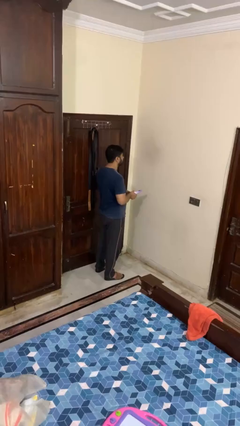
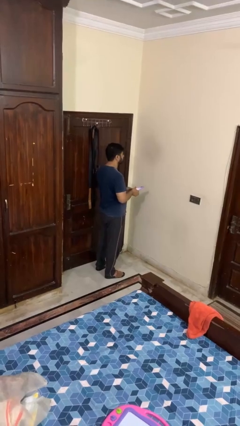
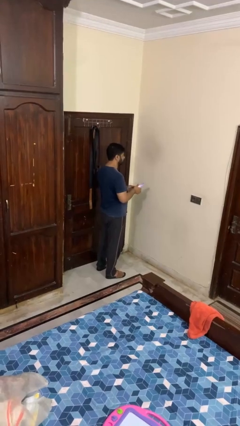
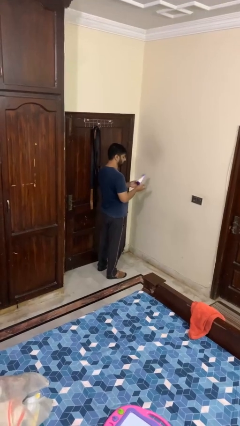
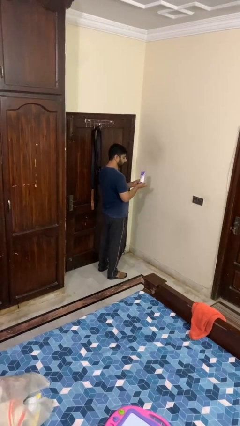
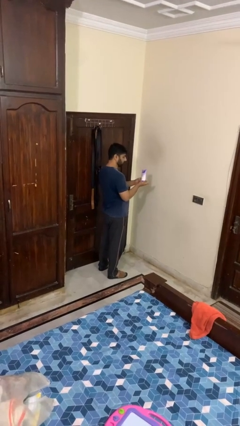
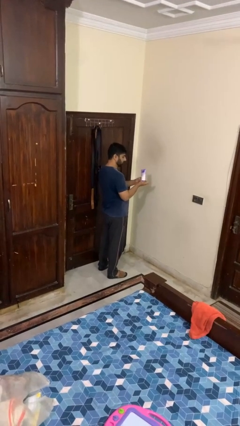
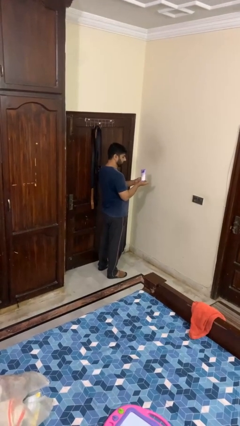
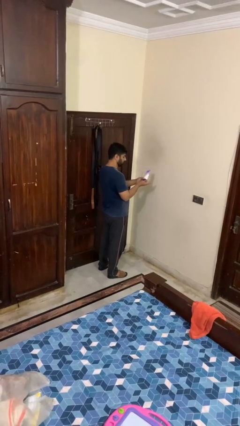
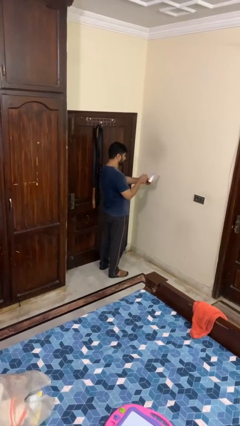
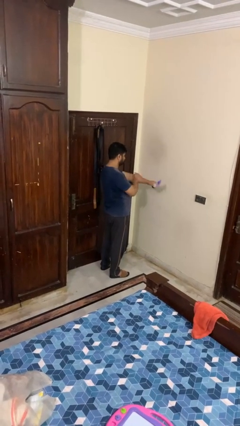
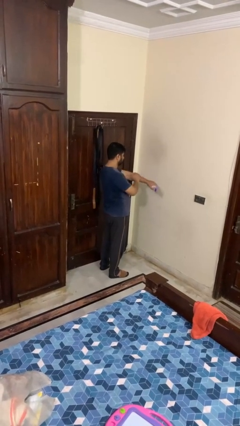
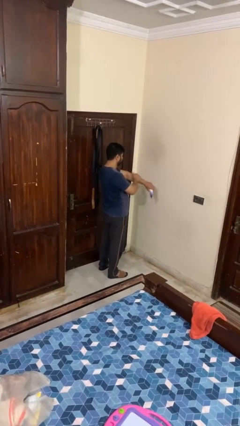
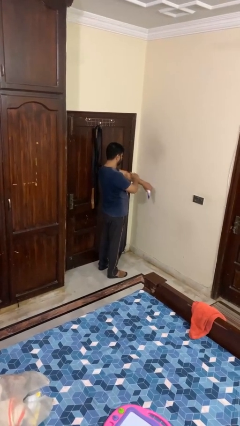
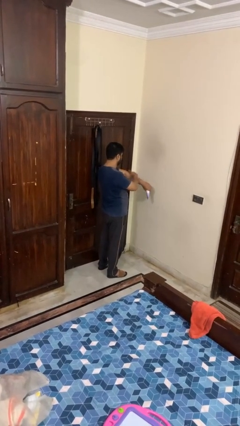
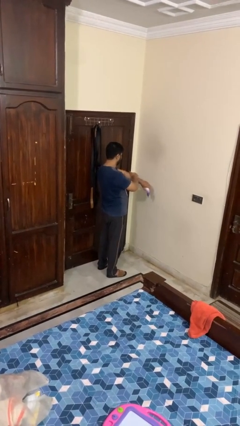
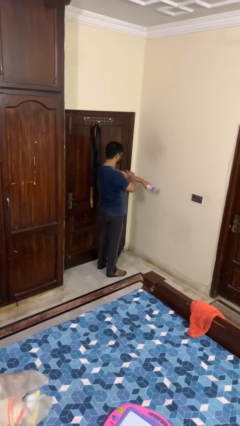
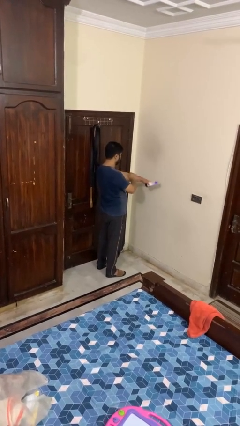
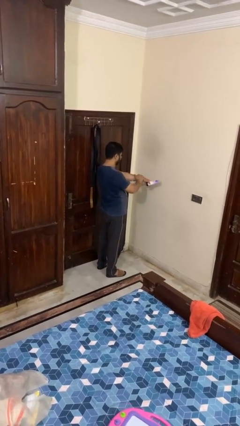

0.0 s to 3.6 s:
person applies sunscreen

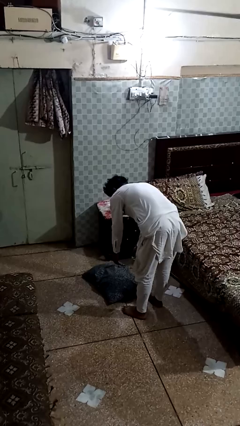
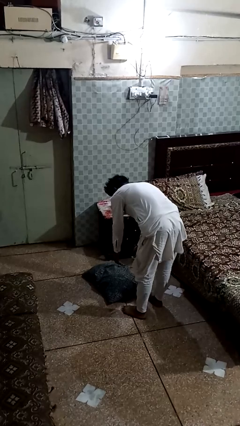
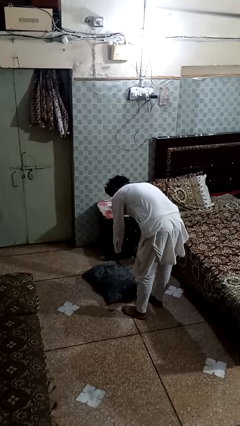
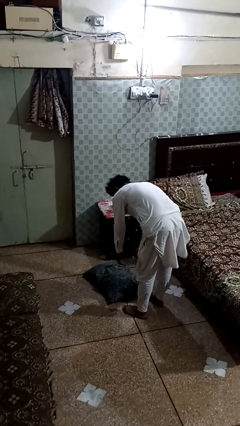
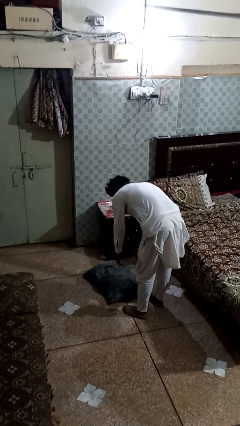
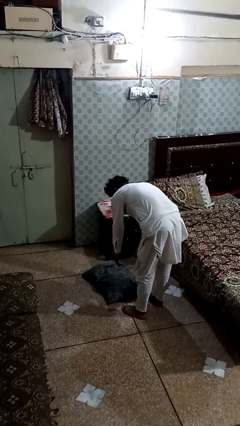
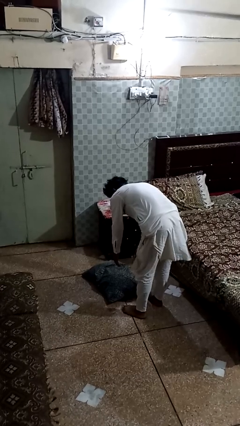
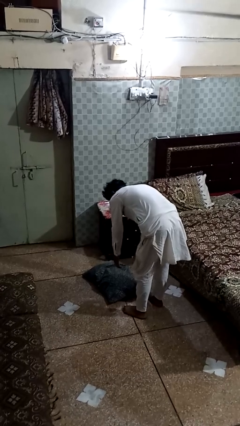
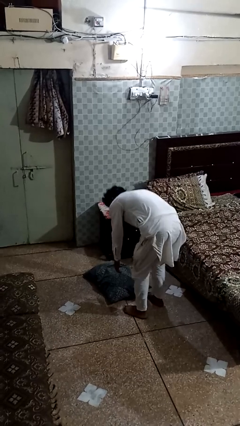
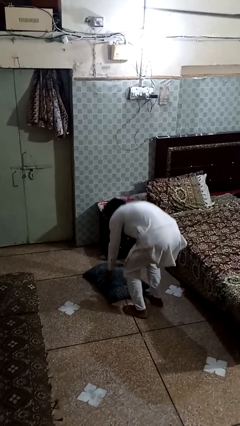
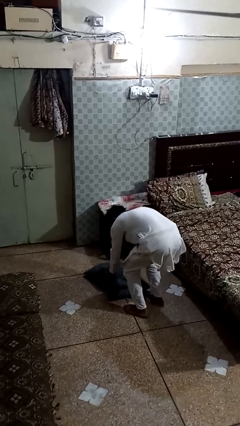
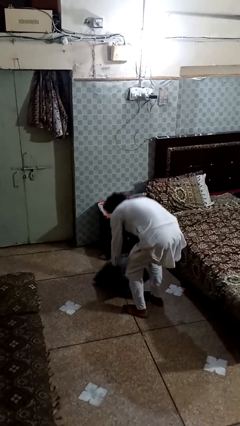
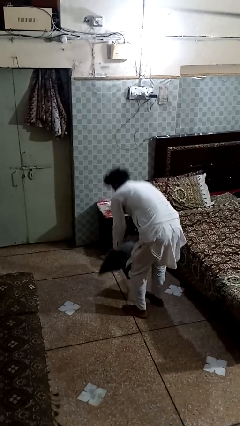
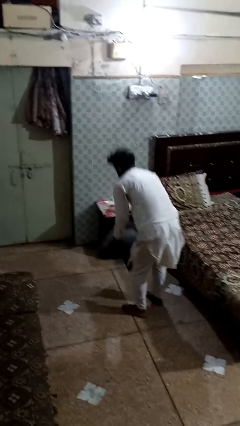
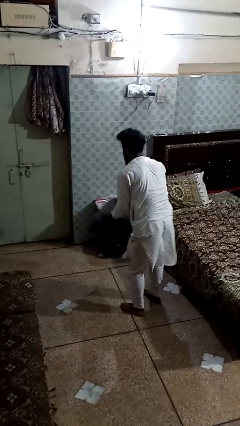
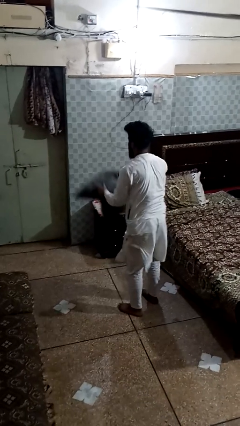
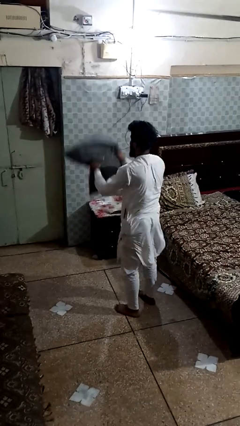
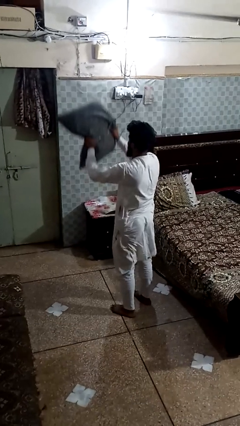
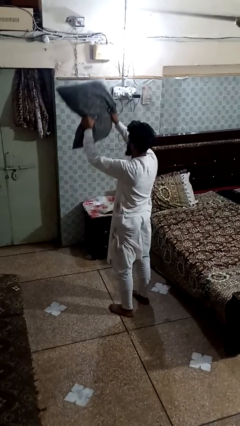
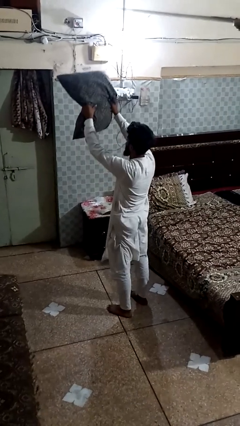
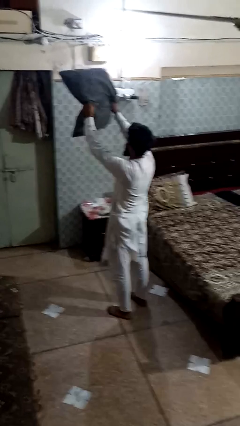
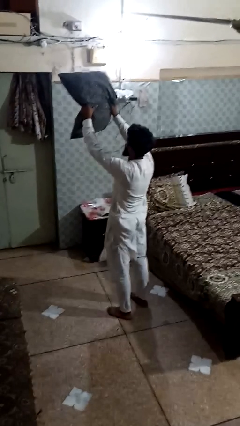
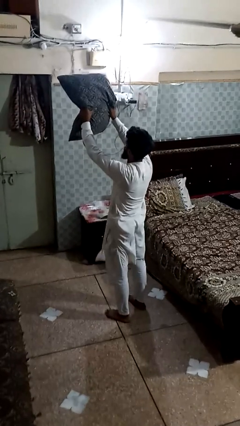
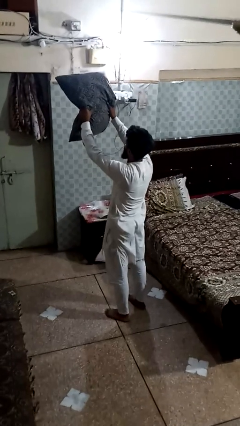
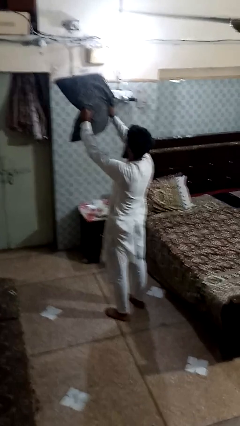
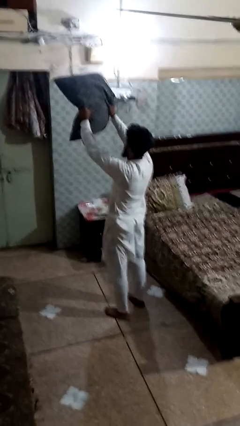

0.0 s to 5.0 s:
person picks up object from floor

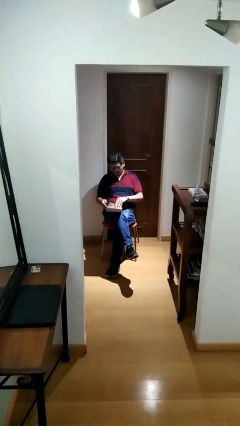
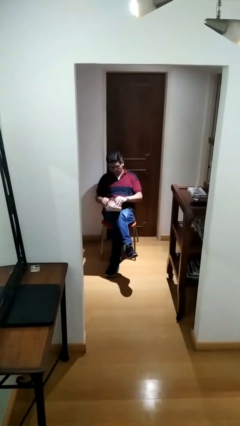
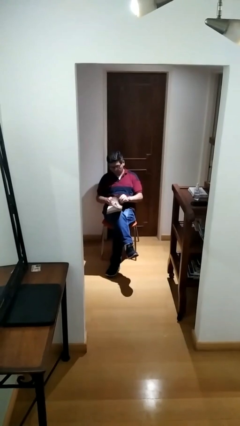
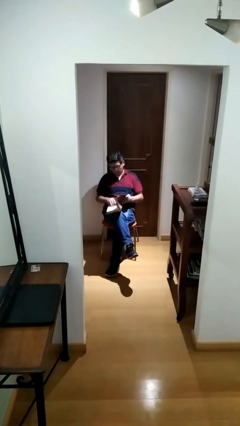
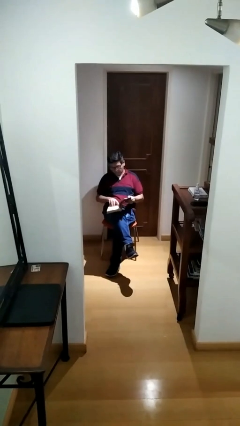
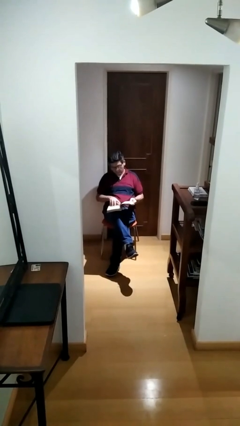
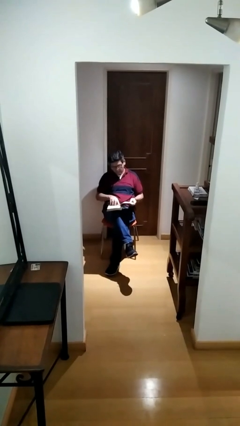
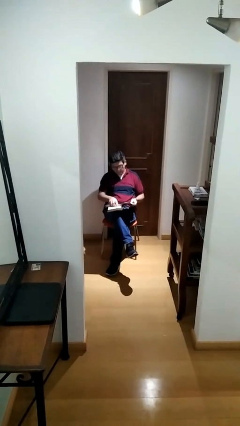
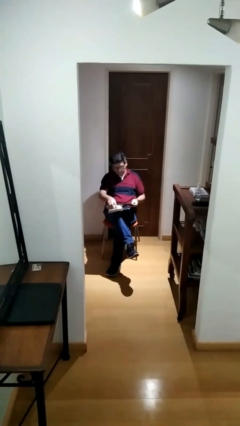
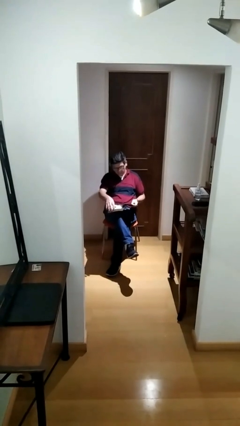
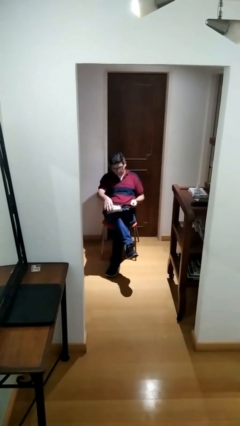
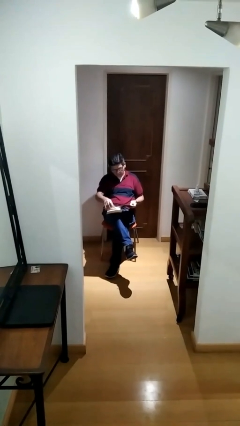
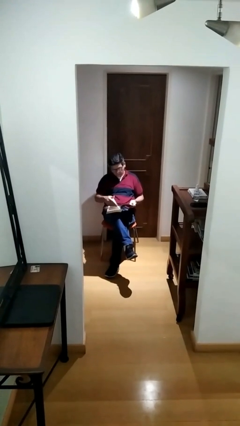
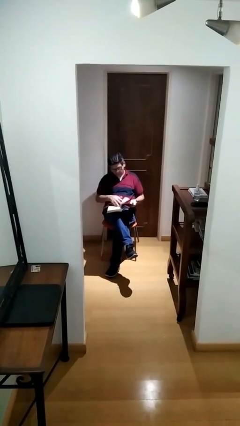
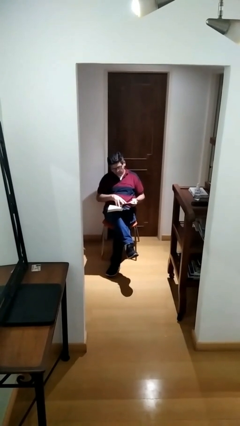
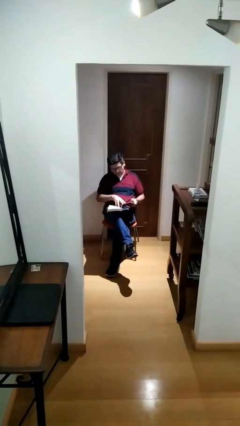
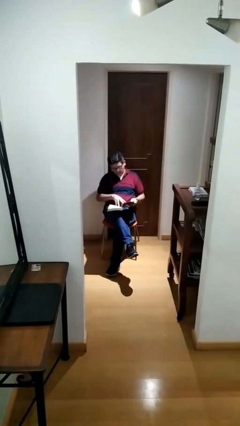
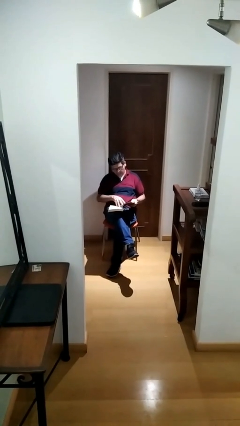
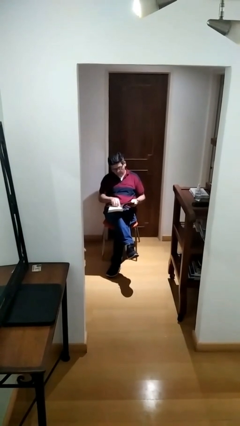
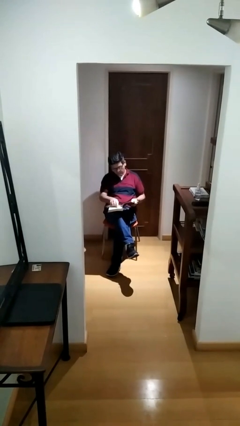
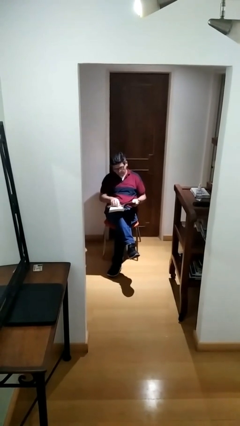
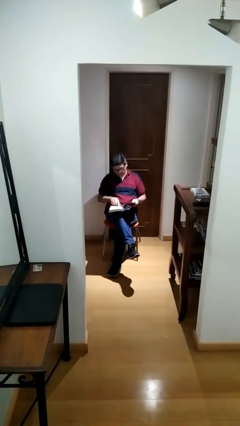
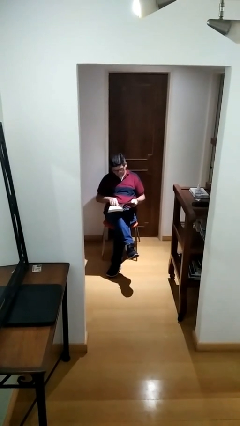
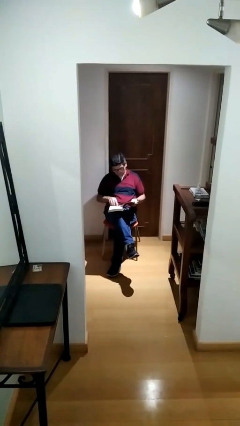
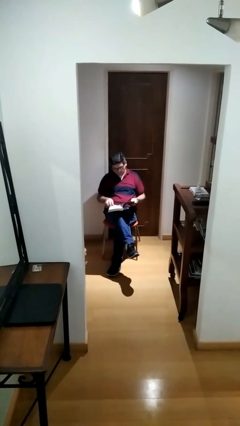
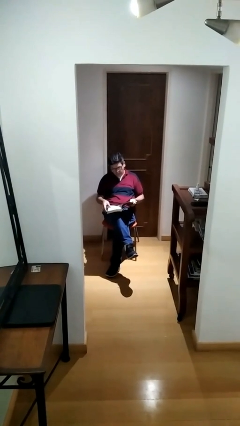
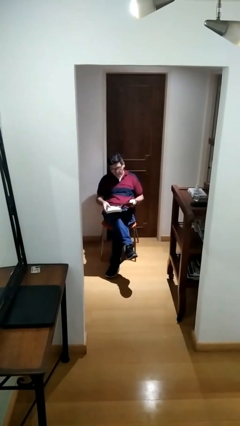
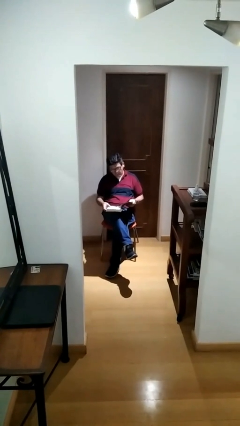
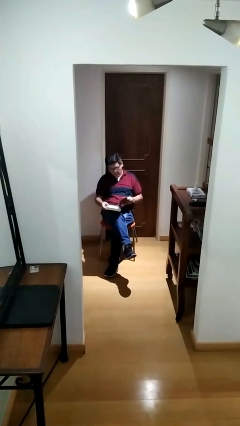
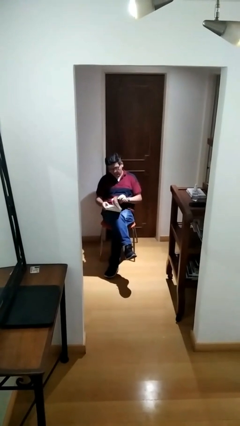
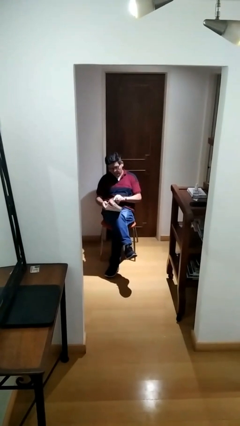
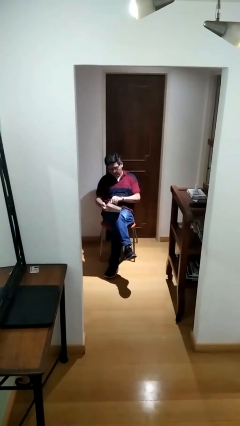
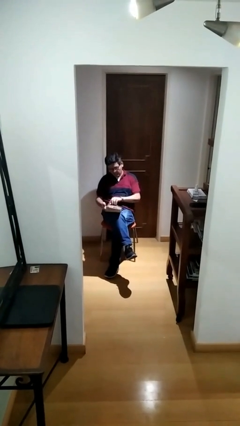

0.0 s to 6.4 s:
person reads document

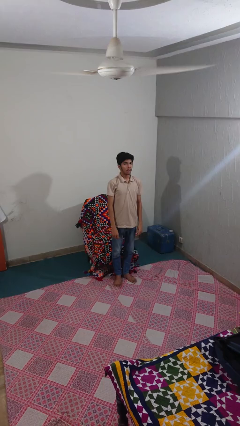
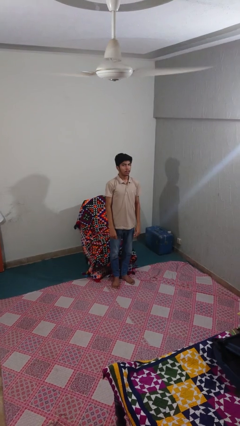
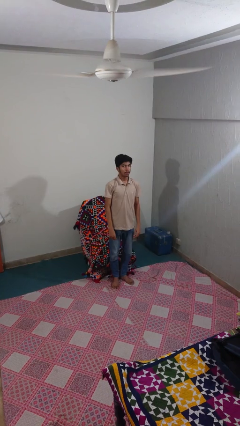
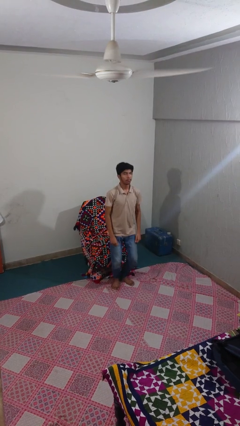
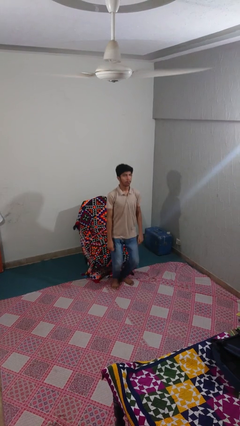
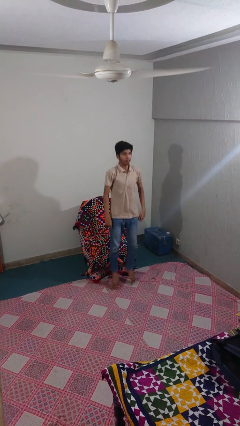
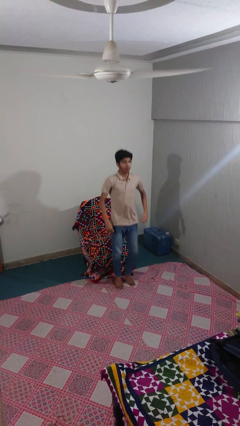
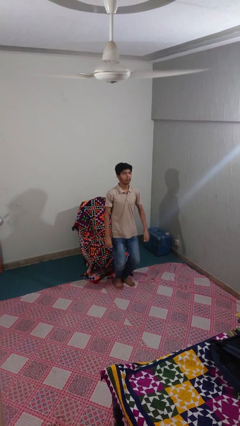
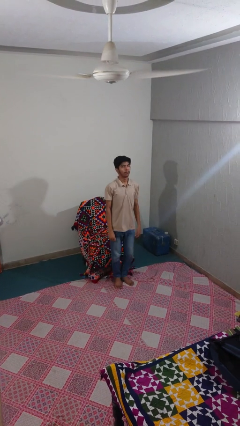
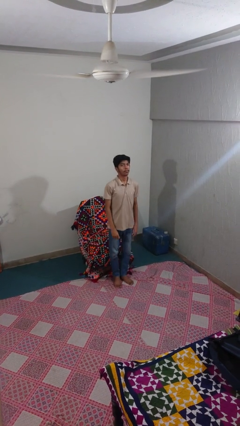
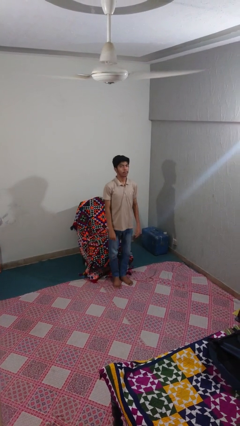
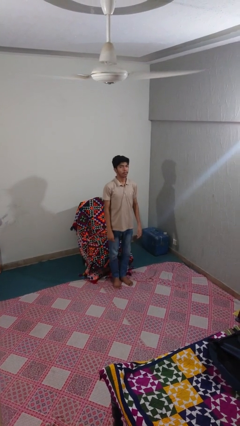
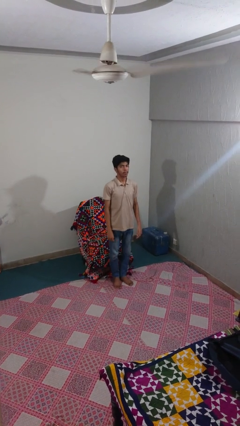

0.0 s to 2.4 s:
person jumps
